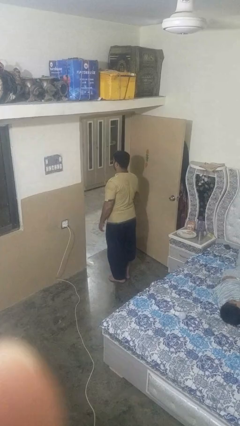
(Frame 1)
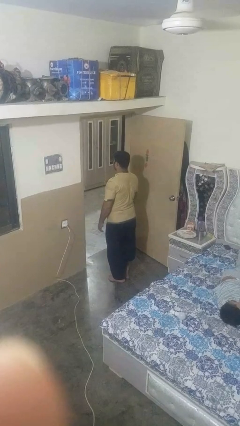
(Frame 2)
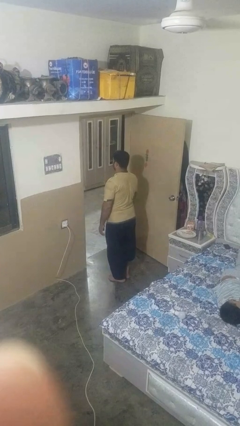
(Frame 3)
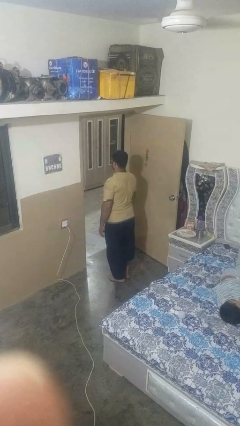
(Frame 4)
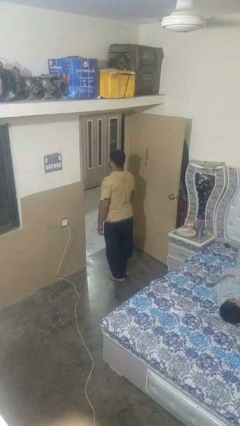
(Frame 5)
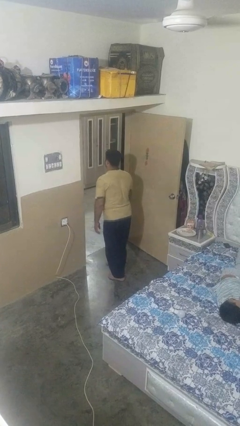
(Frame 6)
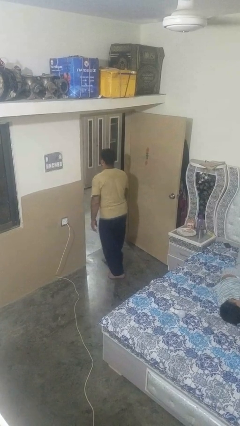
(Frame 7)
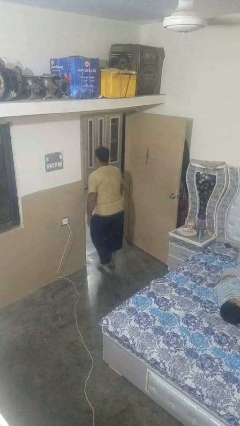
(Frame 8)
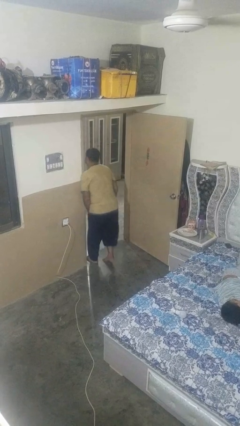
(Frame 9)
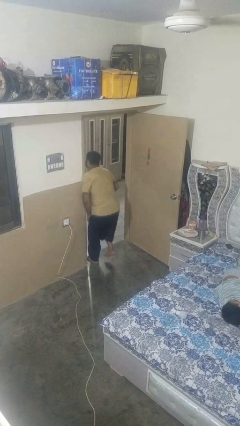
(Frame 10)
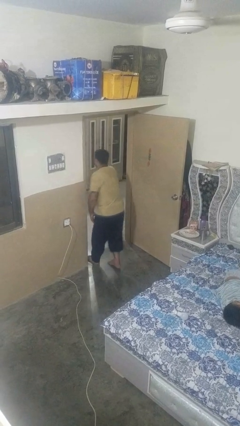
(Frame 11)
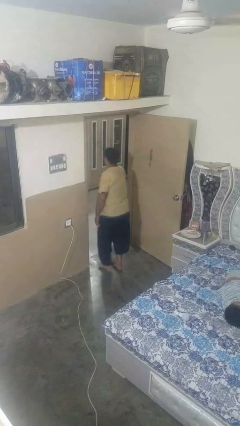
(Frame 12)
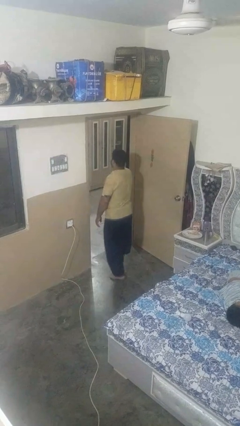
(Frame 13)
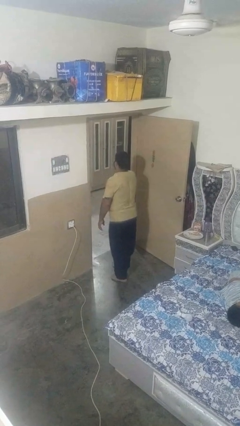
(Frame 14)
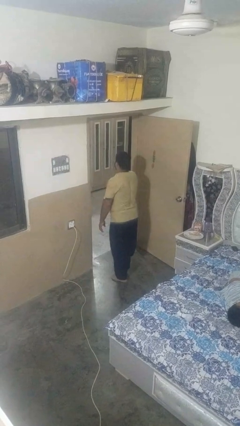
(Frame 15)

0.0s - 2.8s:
person bumps into wall

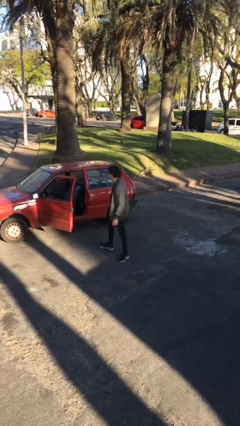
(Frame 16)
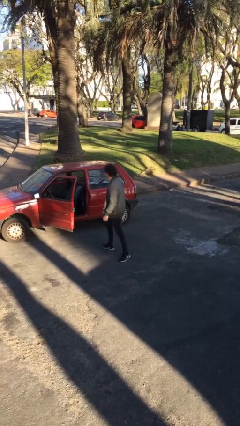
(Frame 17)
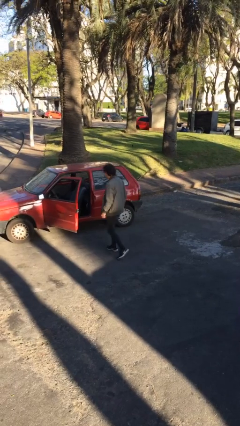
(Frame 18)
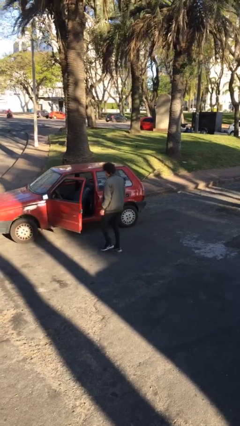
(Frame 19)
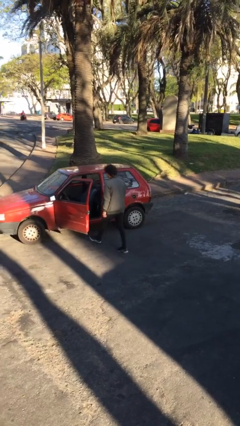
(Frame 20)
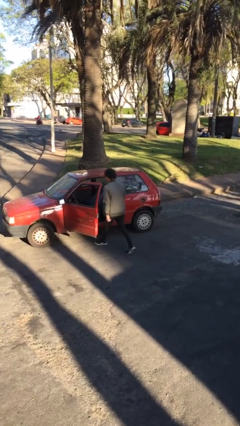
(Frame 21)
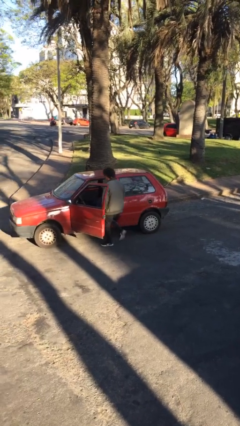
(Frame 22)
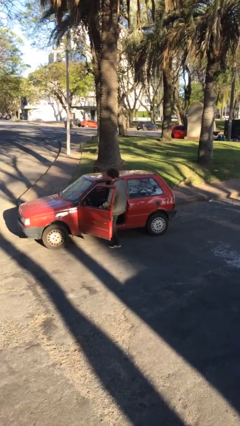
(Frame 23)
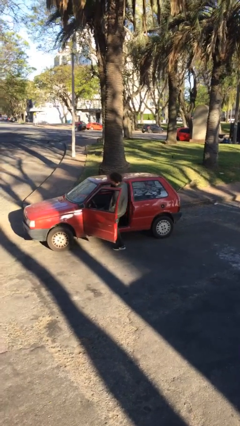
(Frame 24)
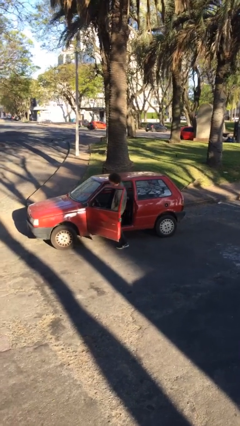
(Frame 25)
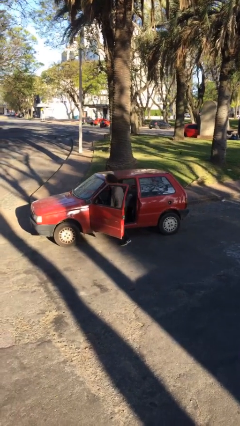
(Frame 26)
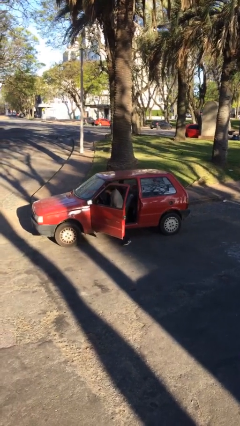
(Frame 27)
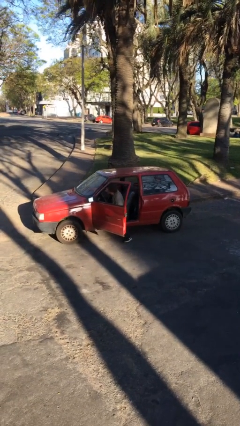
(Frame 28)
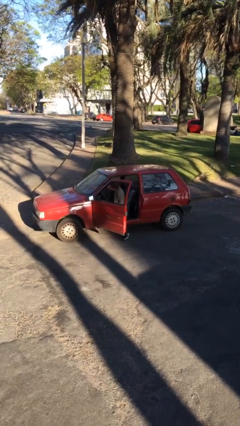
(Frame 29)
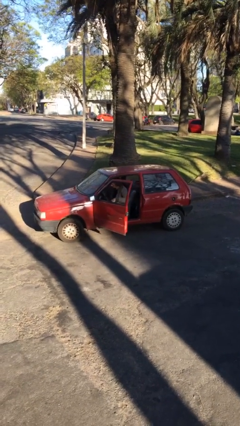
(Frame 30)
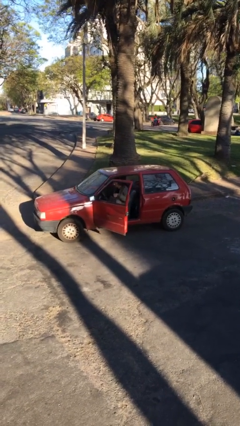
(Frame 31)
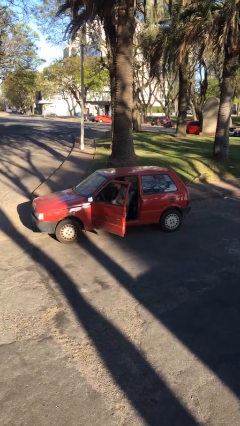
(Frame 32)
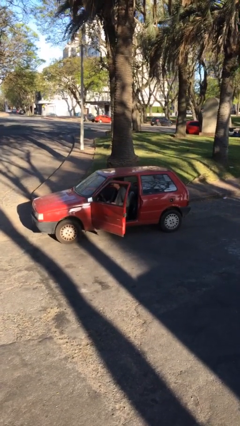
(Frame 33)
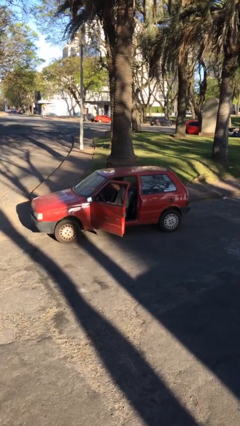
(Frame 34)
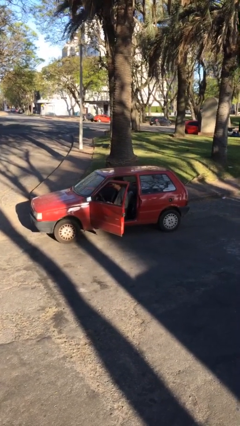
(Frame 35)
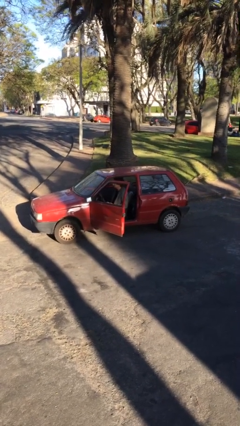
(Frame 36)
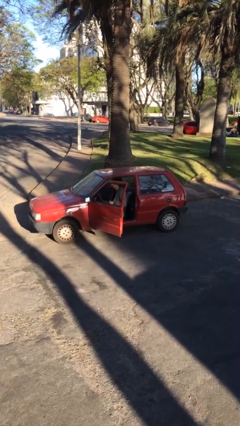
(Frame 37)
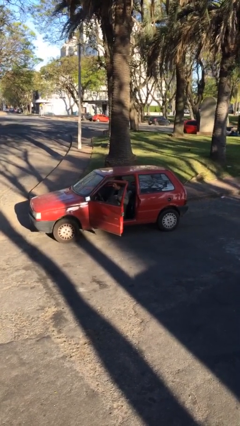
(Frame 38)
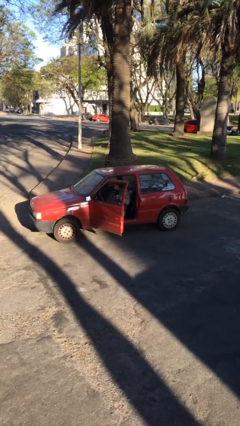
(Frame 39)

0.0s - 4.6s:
person enters car

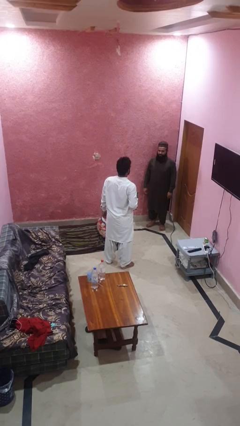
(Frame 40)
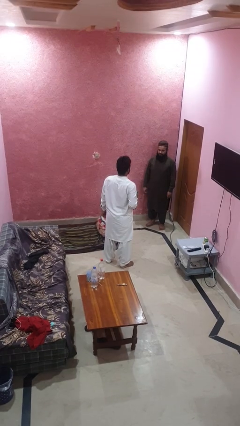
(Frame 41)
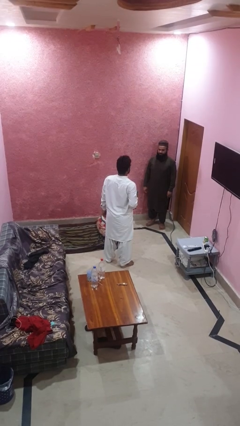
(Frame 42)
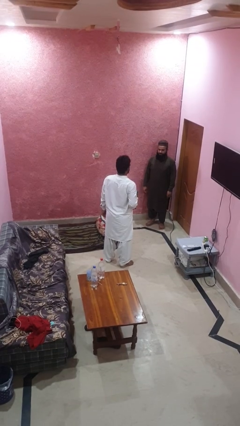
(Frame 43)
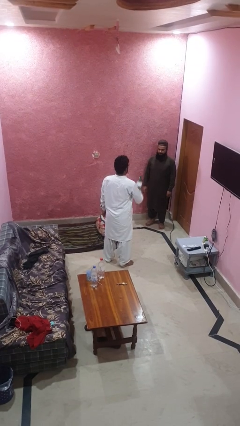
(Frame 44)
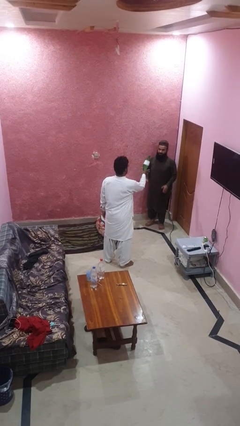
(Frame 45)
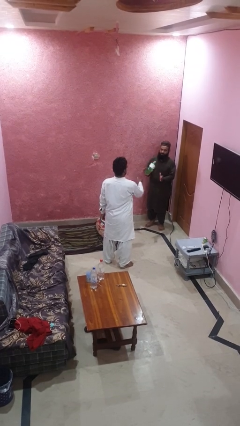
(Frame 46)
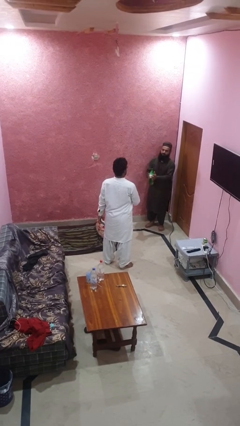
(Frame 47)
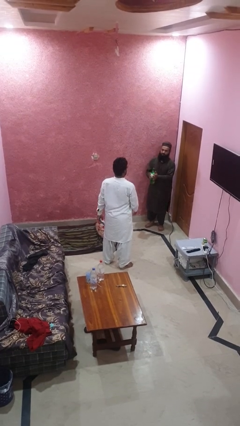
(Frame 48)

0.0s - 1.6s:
person throws object to person

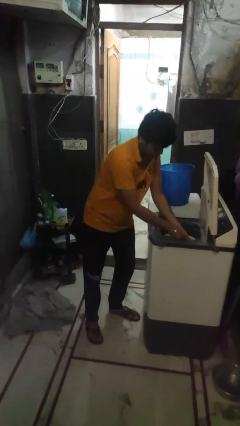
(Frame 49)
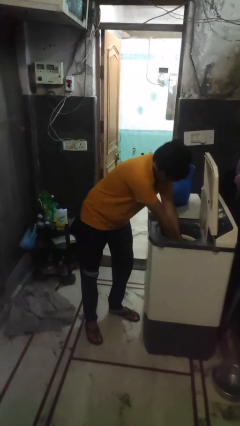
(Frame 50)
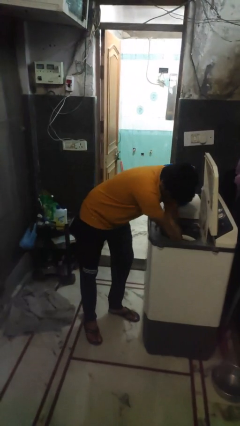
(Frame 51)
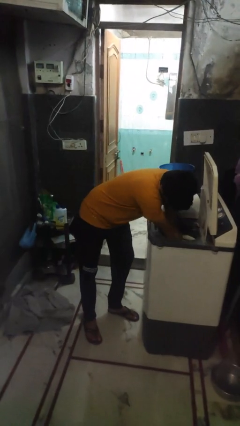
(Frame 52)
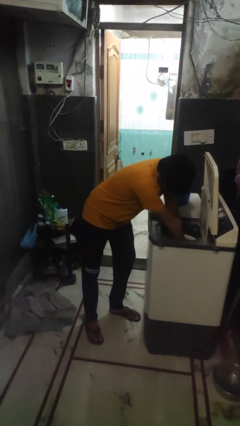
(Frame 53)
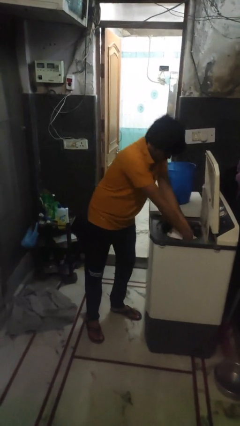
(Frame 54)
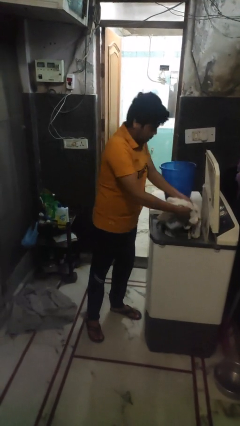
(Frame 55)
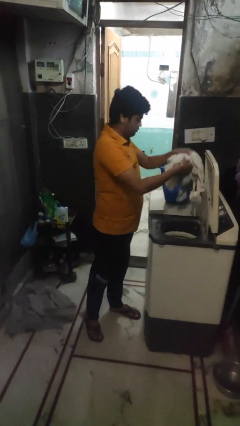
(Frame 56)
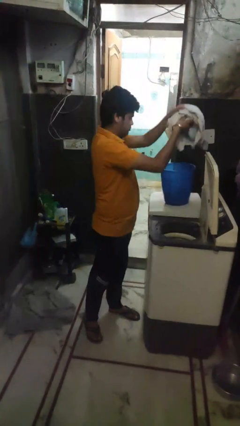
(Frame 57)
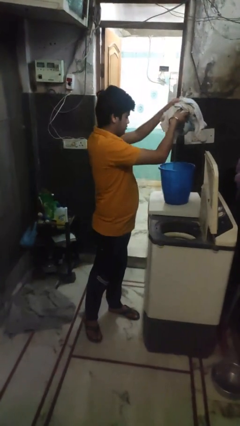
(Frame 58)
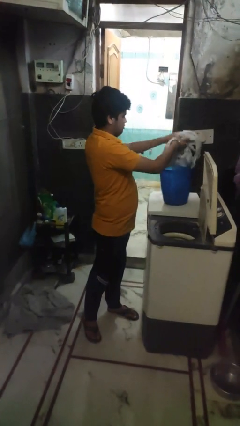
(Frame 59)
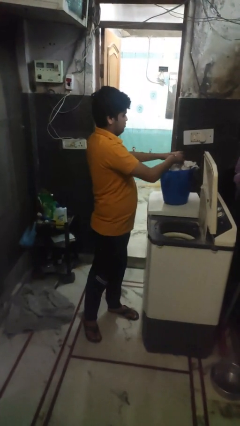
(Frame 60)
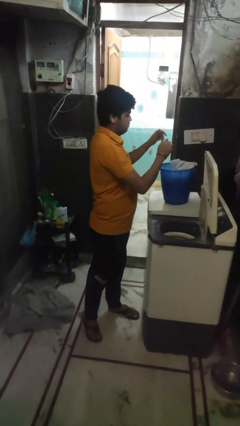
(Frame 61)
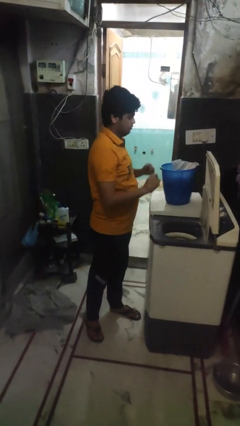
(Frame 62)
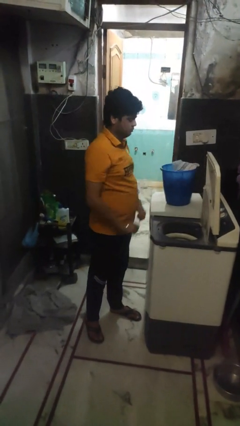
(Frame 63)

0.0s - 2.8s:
person unloads clotheswasher

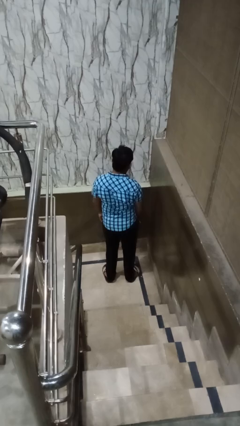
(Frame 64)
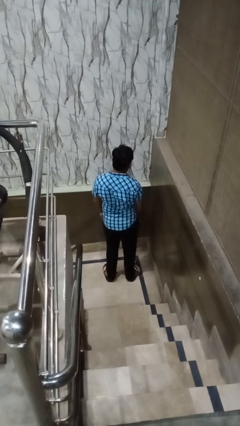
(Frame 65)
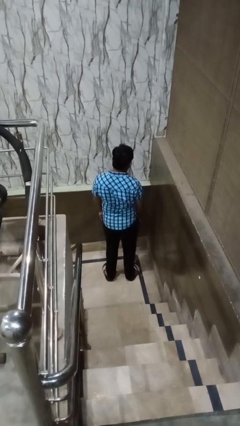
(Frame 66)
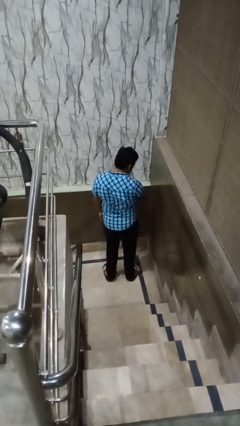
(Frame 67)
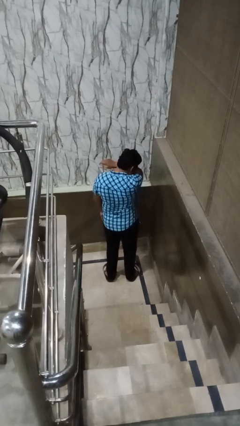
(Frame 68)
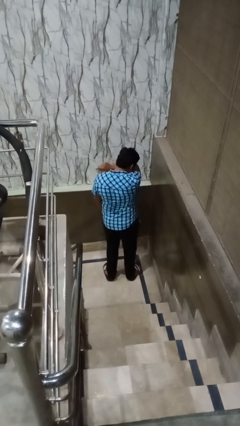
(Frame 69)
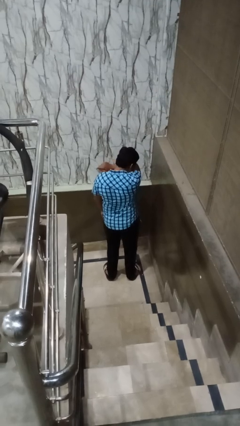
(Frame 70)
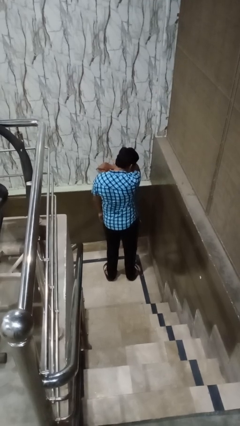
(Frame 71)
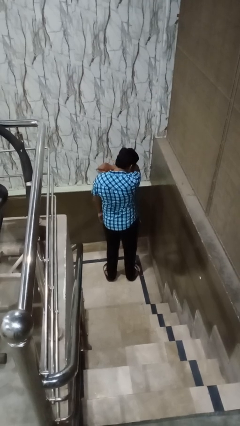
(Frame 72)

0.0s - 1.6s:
person sneezes into arm

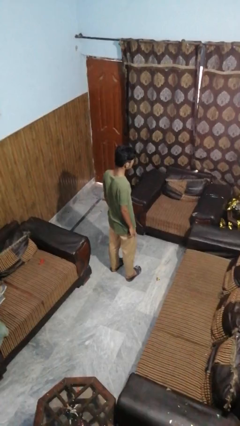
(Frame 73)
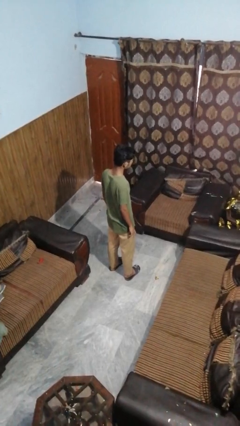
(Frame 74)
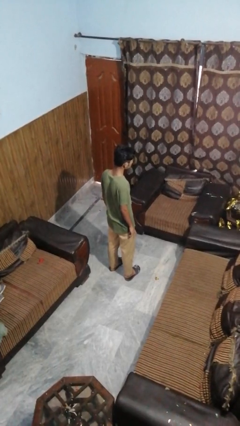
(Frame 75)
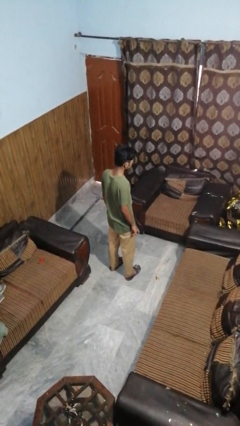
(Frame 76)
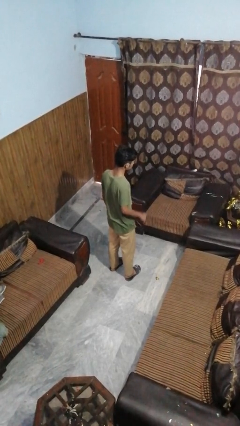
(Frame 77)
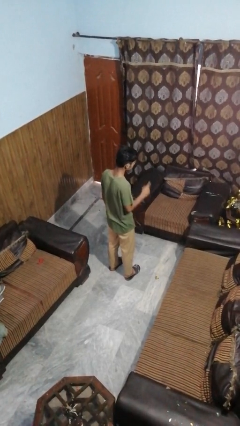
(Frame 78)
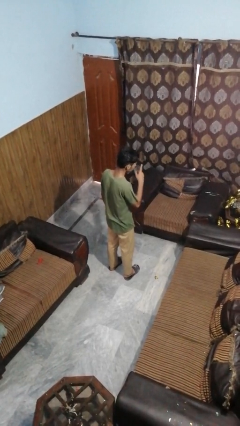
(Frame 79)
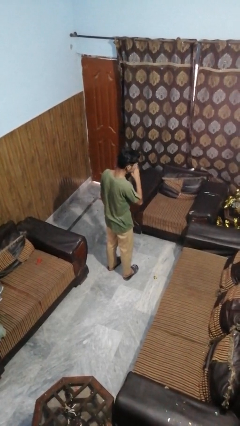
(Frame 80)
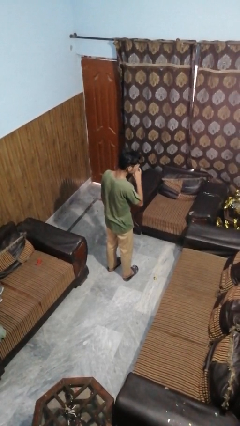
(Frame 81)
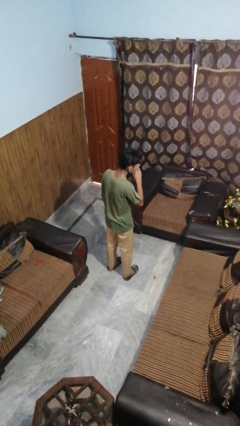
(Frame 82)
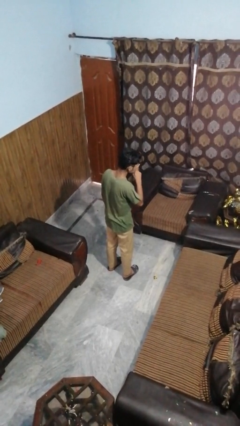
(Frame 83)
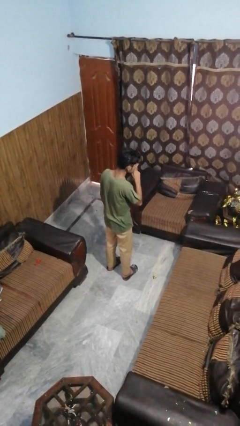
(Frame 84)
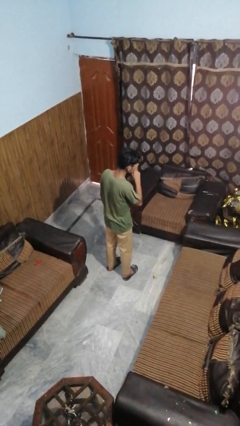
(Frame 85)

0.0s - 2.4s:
person gestures be quiet

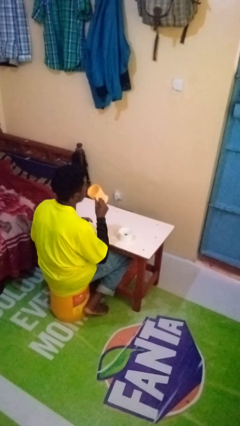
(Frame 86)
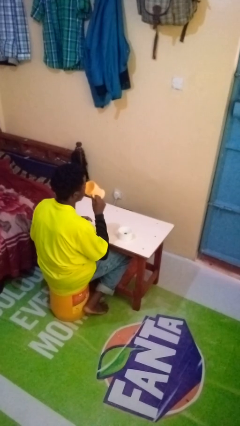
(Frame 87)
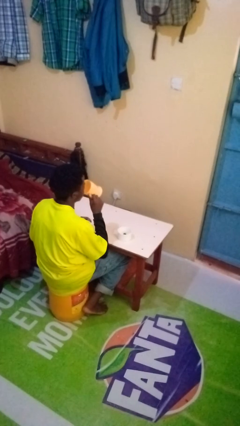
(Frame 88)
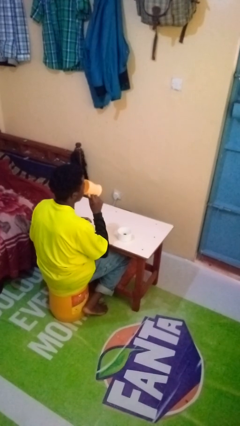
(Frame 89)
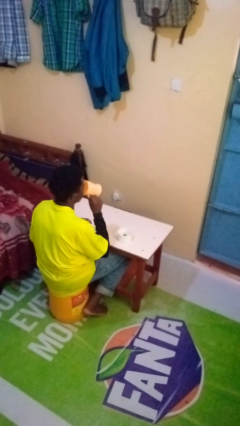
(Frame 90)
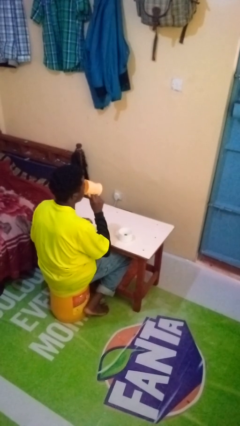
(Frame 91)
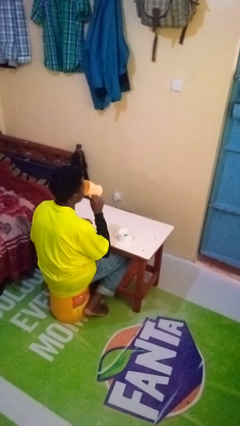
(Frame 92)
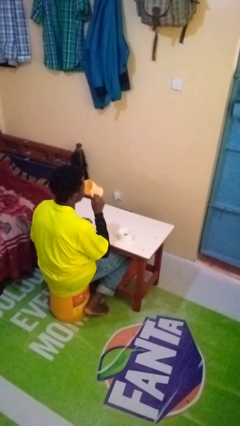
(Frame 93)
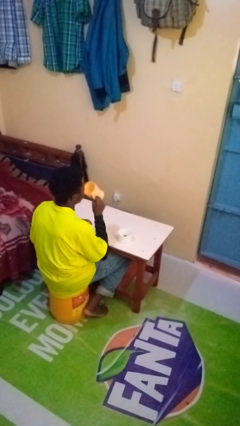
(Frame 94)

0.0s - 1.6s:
person drinks from cup
